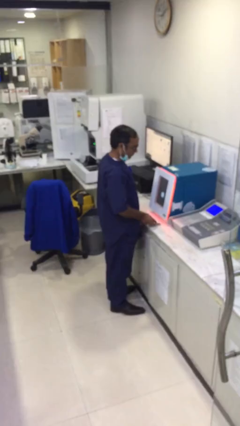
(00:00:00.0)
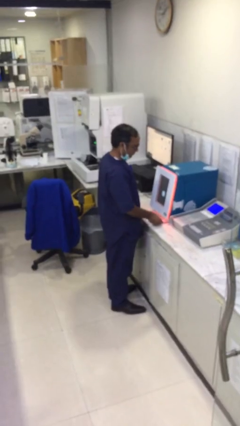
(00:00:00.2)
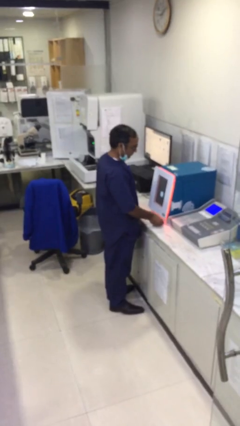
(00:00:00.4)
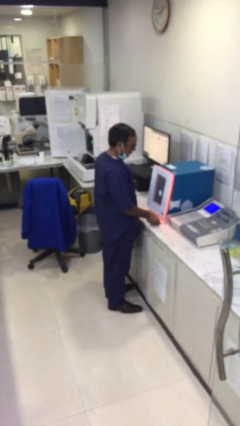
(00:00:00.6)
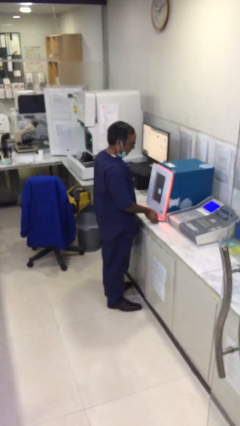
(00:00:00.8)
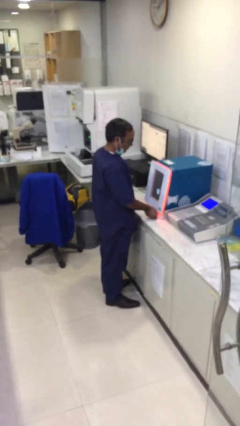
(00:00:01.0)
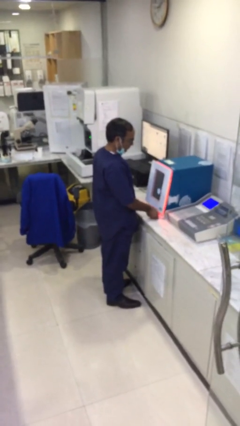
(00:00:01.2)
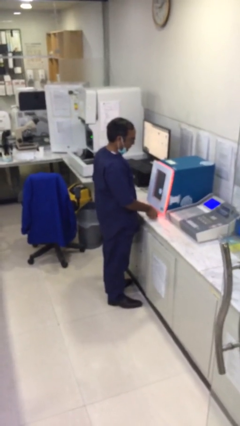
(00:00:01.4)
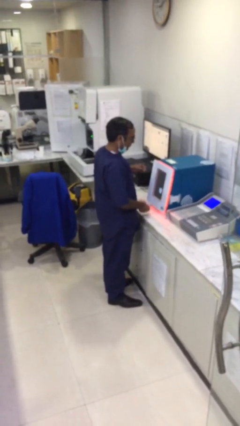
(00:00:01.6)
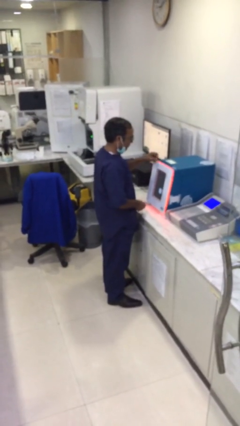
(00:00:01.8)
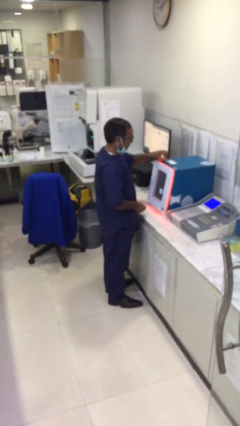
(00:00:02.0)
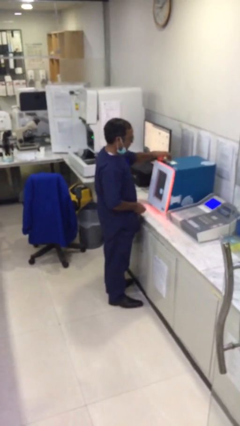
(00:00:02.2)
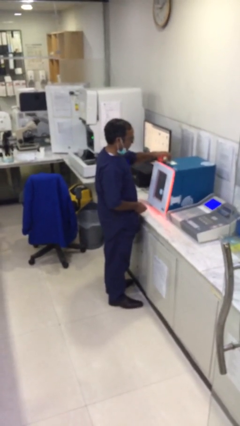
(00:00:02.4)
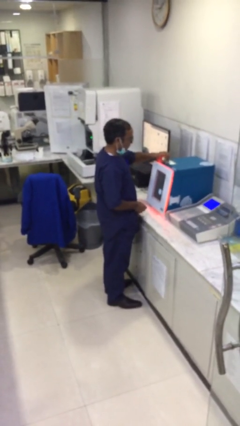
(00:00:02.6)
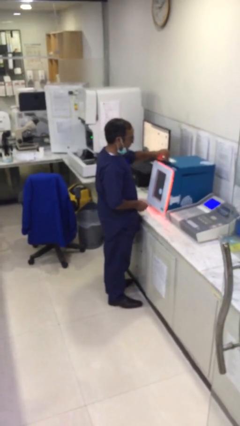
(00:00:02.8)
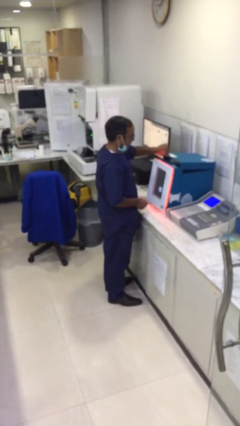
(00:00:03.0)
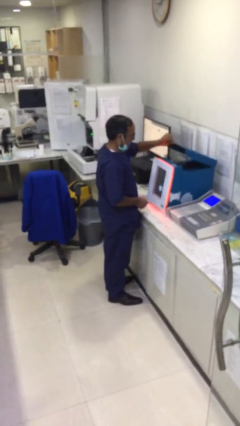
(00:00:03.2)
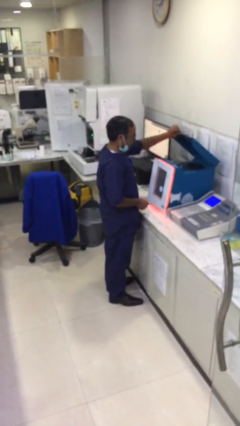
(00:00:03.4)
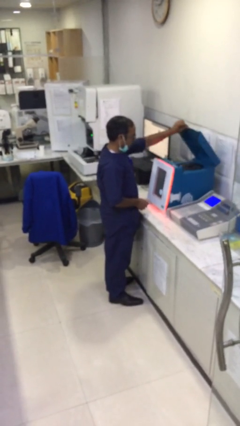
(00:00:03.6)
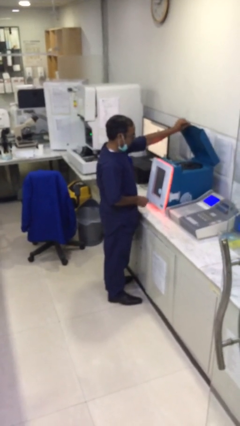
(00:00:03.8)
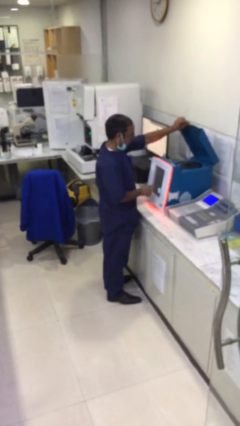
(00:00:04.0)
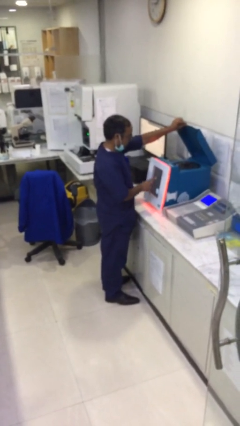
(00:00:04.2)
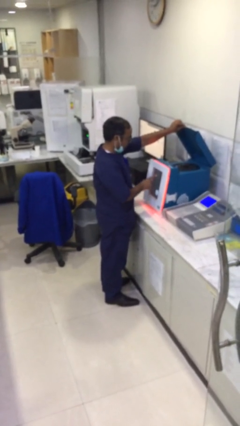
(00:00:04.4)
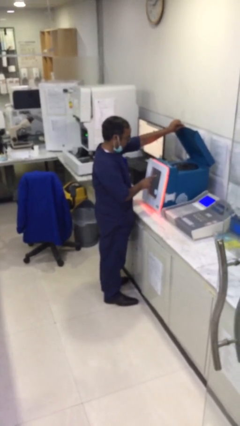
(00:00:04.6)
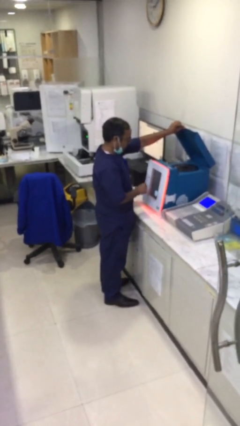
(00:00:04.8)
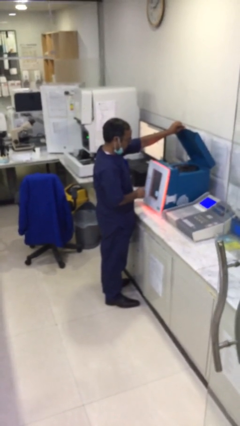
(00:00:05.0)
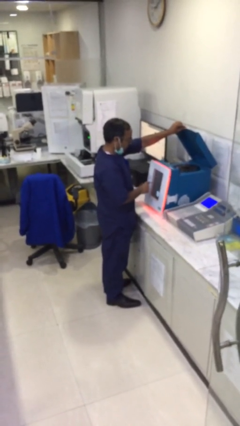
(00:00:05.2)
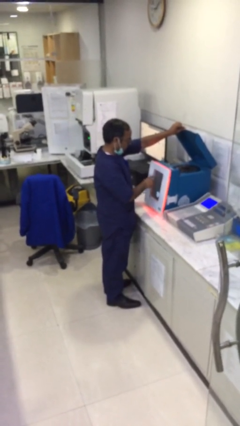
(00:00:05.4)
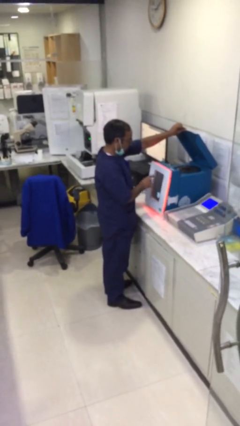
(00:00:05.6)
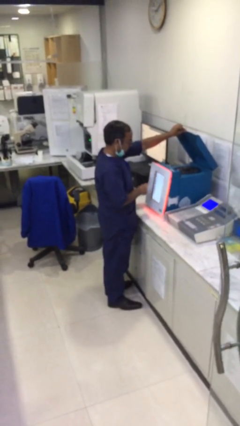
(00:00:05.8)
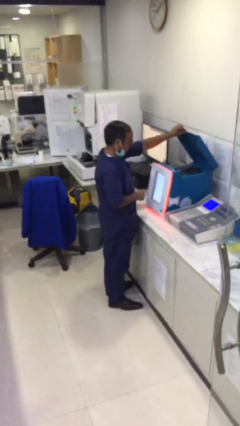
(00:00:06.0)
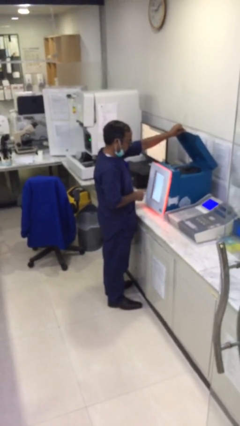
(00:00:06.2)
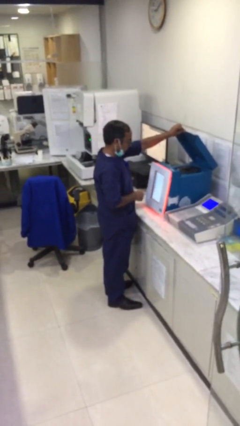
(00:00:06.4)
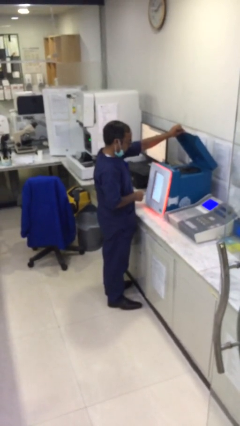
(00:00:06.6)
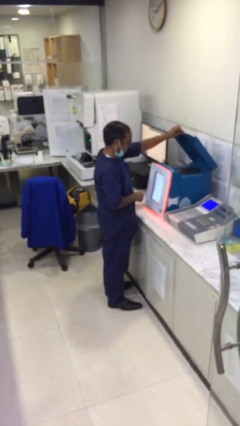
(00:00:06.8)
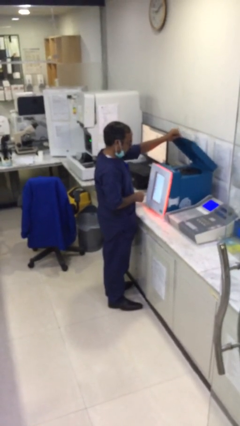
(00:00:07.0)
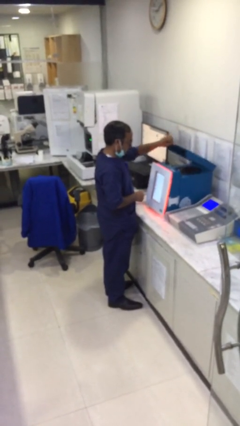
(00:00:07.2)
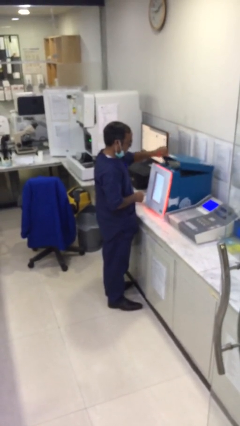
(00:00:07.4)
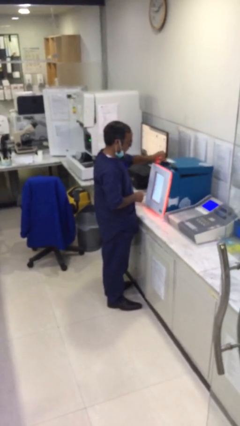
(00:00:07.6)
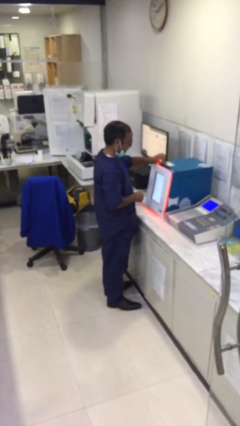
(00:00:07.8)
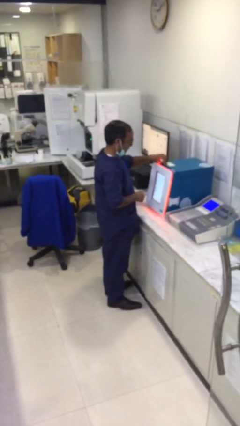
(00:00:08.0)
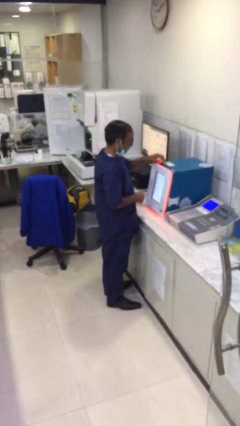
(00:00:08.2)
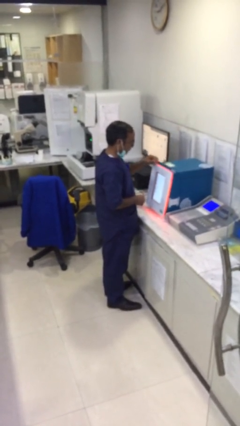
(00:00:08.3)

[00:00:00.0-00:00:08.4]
person purchases from machine

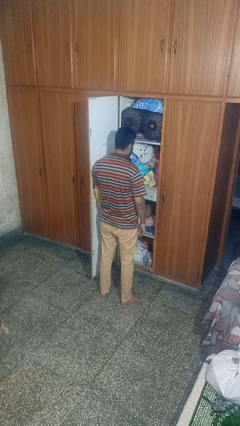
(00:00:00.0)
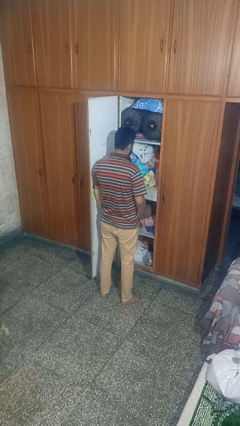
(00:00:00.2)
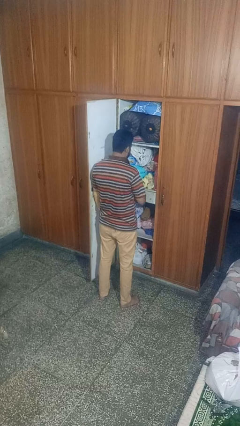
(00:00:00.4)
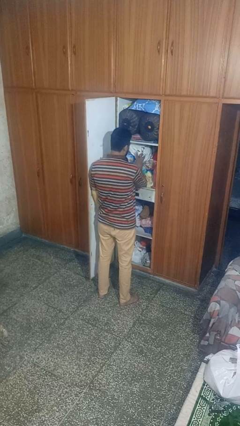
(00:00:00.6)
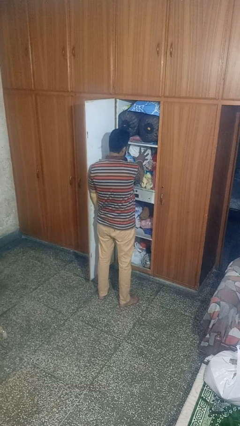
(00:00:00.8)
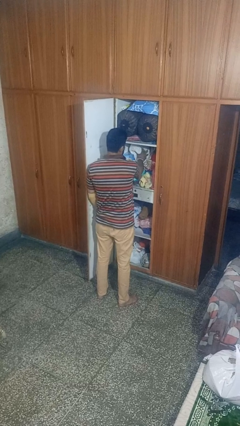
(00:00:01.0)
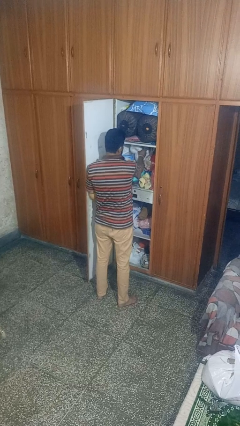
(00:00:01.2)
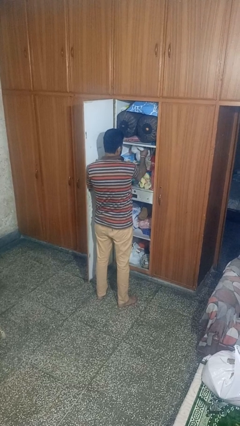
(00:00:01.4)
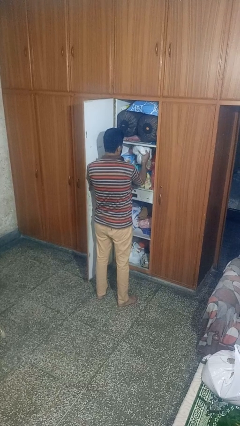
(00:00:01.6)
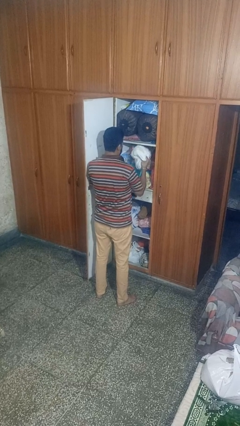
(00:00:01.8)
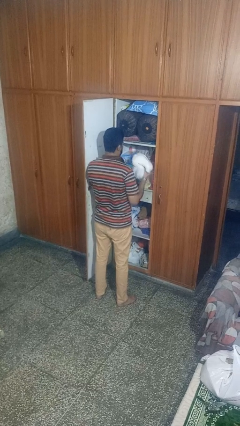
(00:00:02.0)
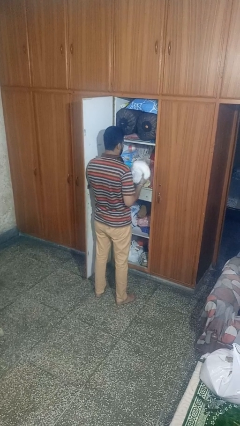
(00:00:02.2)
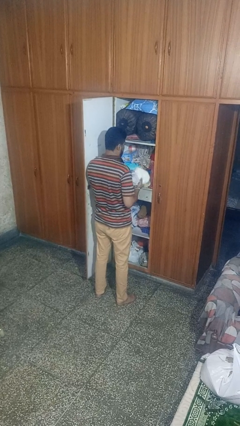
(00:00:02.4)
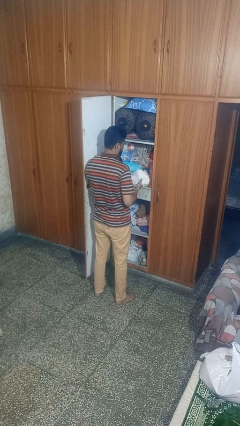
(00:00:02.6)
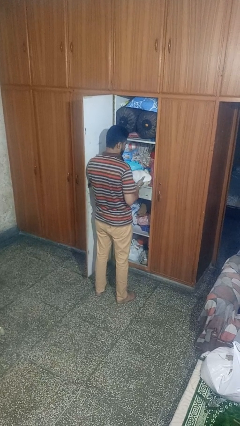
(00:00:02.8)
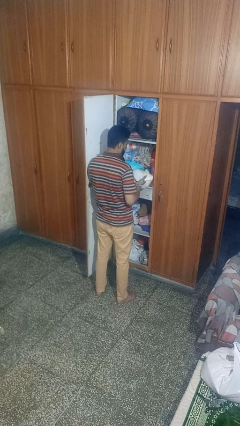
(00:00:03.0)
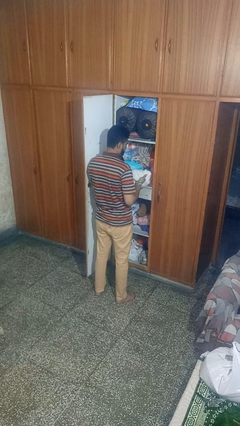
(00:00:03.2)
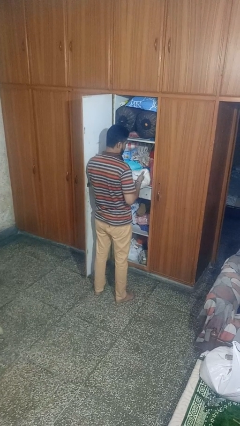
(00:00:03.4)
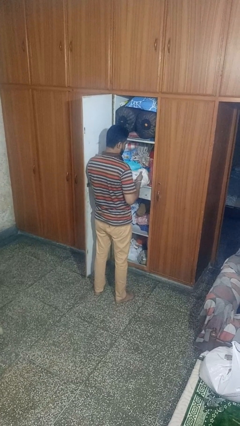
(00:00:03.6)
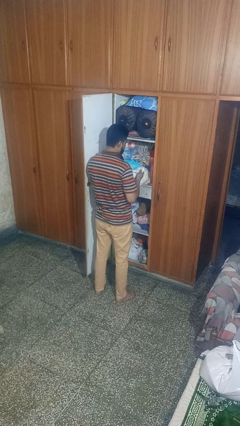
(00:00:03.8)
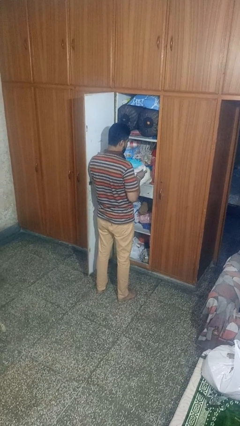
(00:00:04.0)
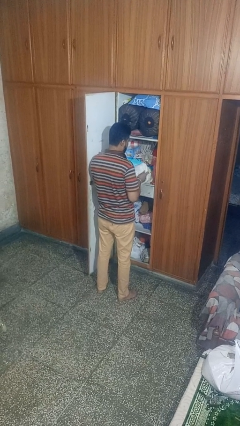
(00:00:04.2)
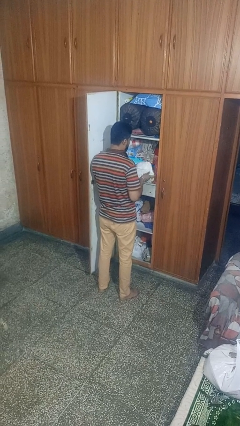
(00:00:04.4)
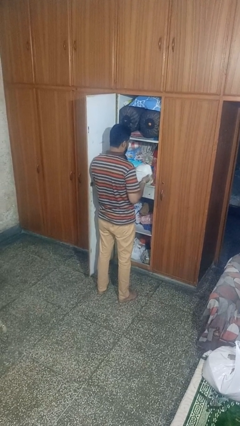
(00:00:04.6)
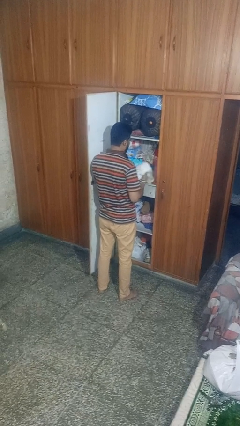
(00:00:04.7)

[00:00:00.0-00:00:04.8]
person picks up object from cabinet

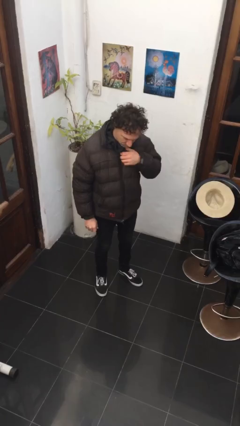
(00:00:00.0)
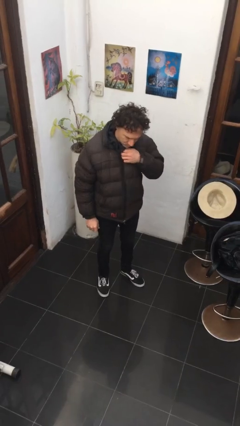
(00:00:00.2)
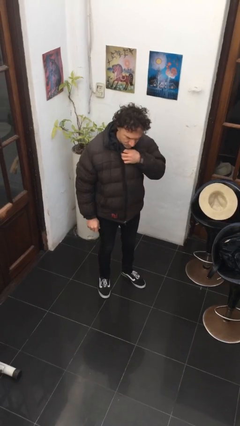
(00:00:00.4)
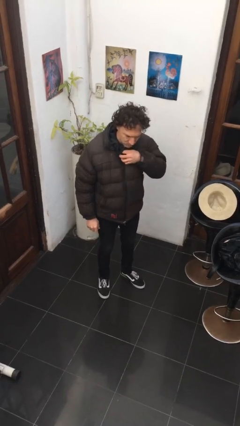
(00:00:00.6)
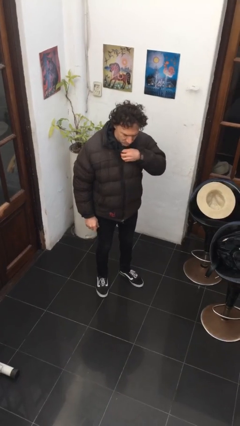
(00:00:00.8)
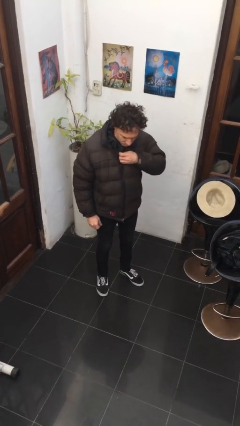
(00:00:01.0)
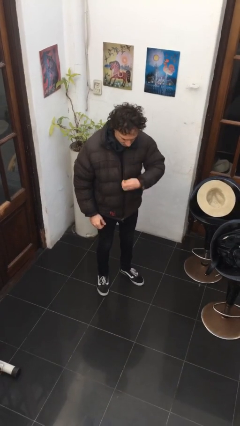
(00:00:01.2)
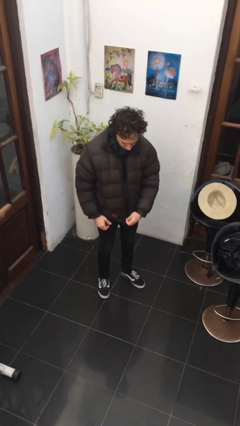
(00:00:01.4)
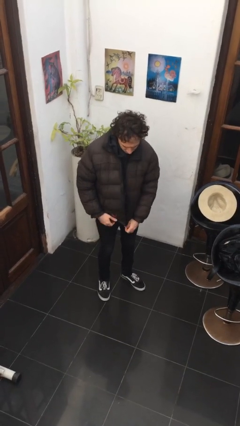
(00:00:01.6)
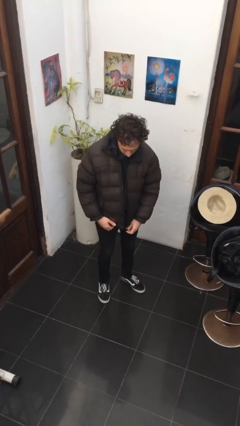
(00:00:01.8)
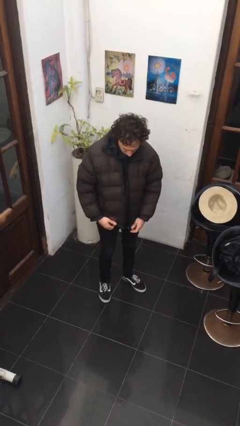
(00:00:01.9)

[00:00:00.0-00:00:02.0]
person unzips jacket

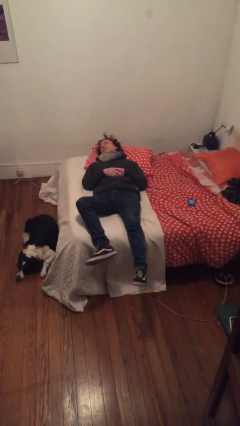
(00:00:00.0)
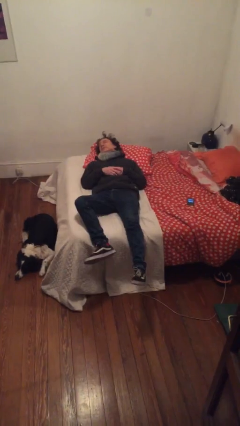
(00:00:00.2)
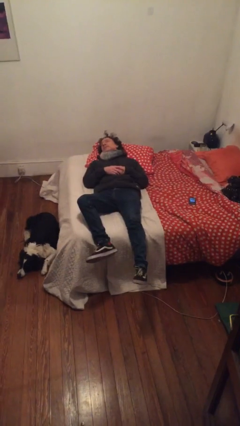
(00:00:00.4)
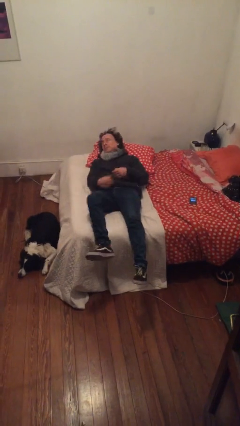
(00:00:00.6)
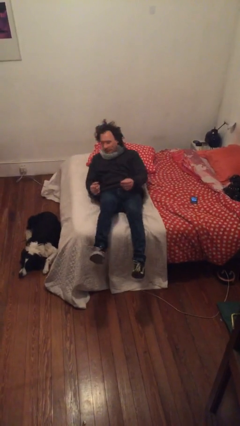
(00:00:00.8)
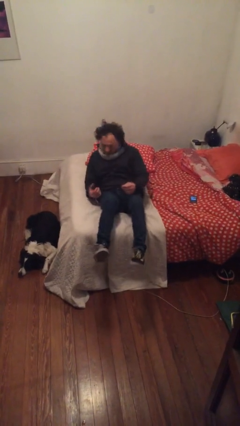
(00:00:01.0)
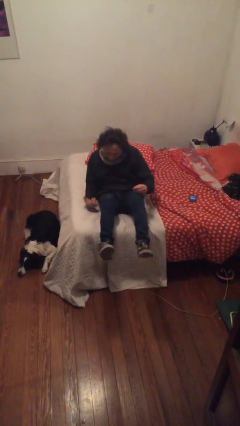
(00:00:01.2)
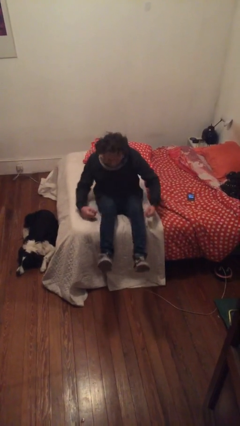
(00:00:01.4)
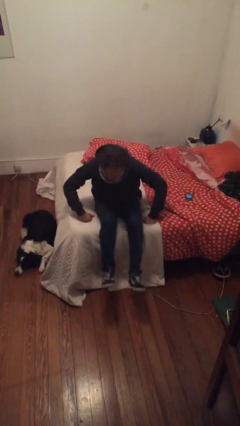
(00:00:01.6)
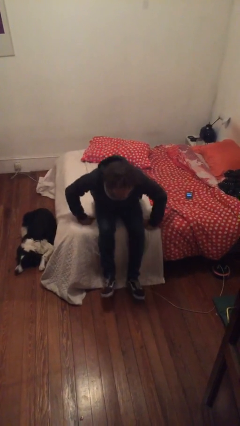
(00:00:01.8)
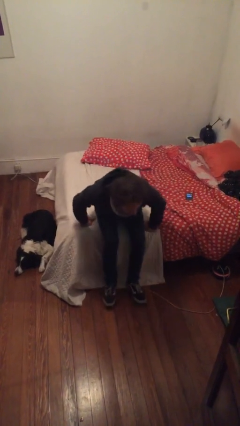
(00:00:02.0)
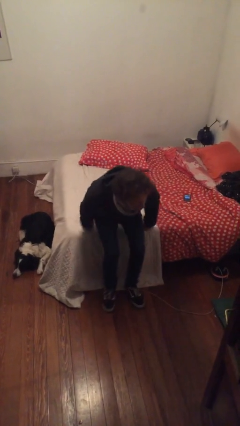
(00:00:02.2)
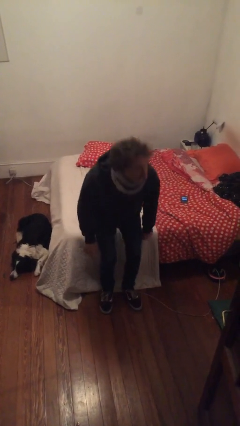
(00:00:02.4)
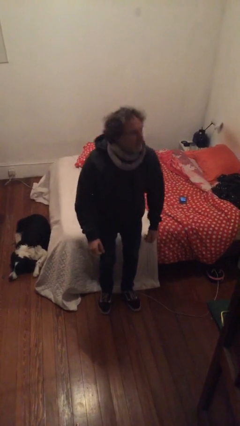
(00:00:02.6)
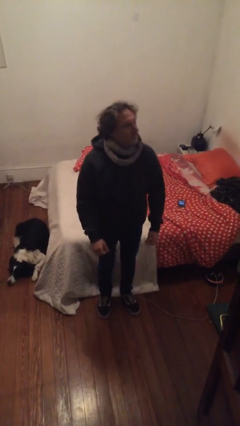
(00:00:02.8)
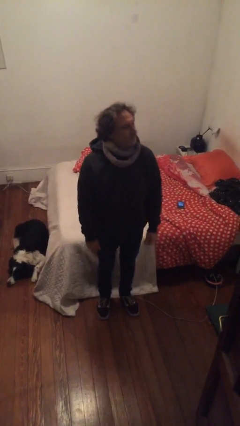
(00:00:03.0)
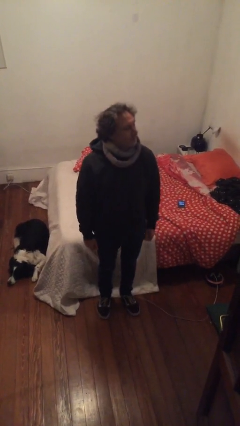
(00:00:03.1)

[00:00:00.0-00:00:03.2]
person stands up
